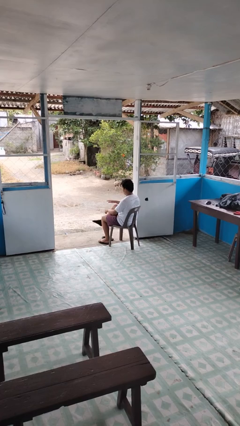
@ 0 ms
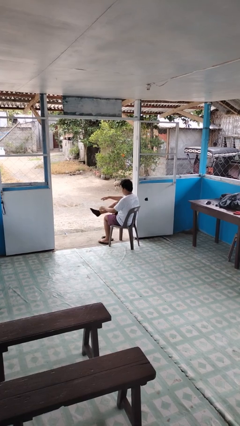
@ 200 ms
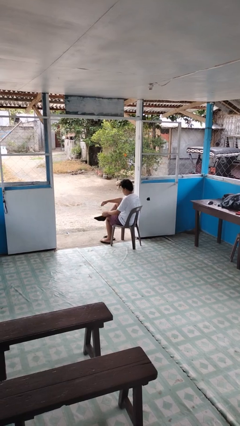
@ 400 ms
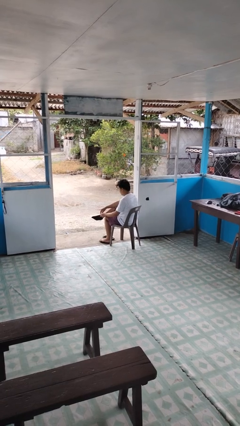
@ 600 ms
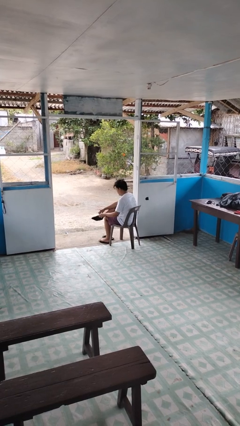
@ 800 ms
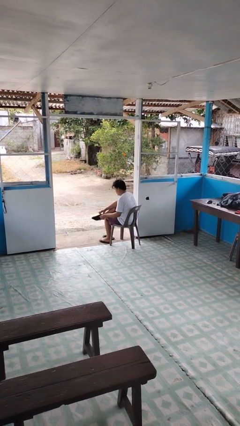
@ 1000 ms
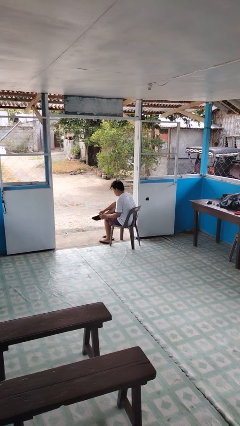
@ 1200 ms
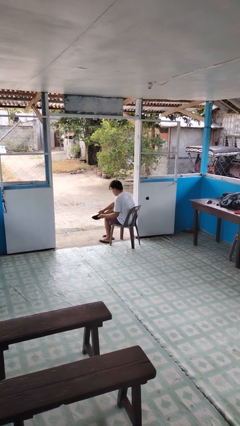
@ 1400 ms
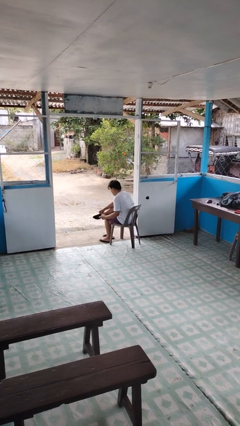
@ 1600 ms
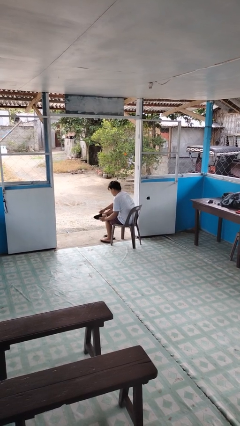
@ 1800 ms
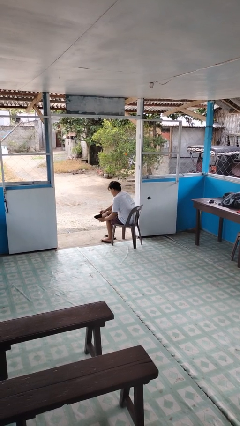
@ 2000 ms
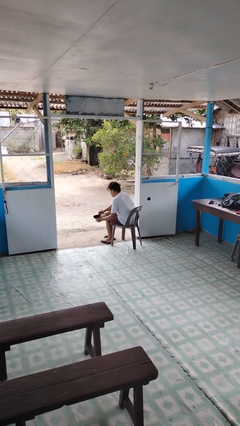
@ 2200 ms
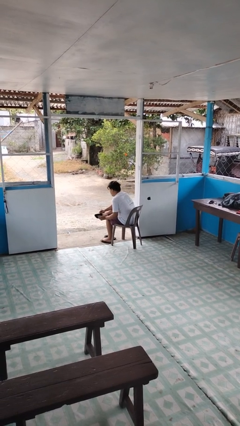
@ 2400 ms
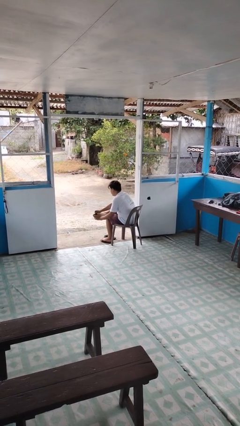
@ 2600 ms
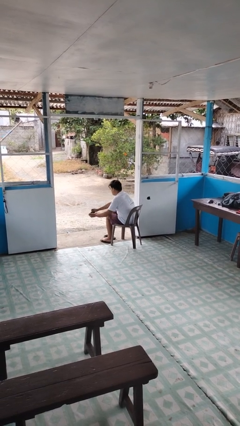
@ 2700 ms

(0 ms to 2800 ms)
person takes off socks

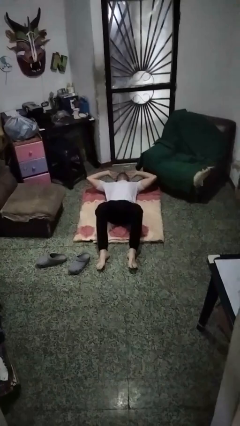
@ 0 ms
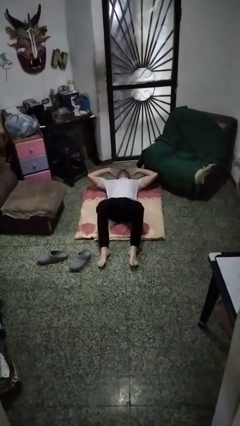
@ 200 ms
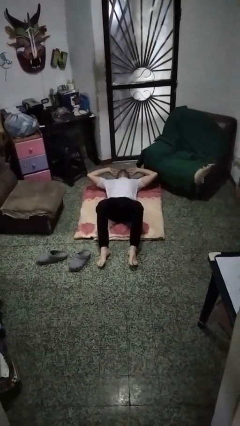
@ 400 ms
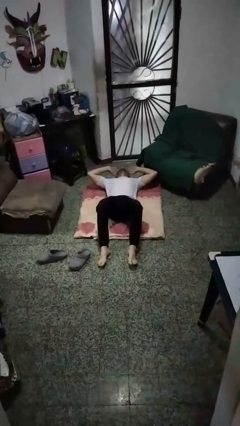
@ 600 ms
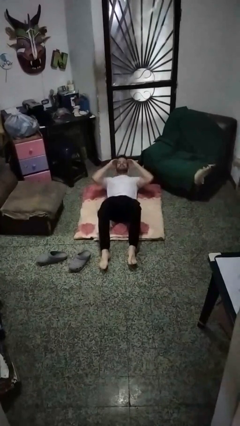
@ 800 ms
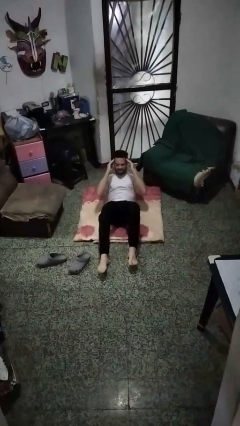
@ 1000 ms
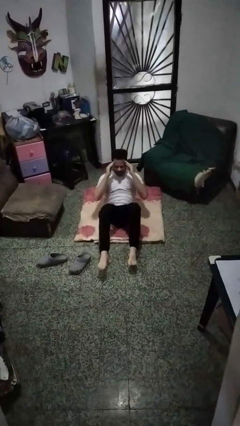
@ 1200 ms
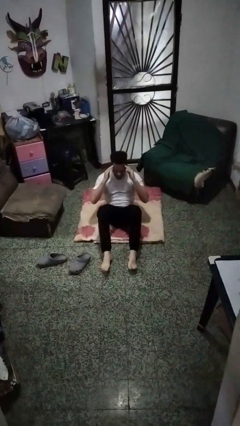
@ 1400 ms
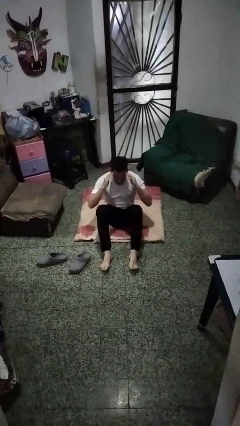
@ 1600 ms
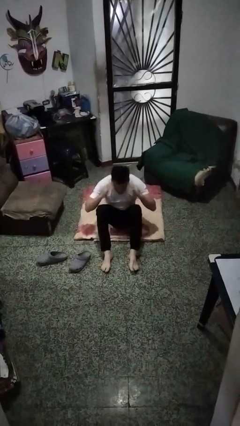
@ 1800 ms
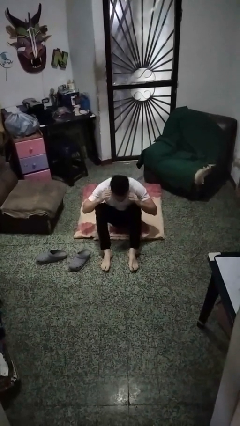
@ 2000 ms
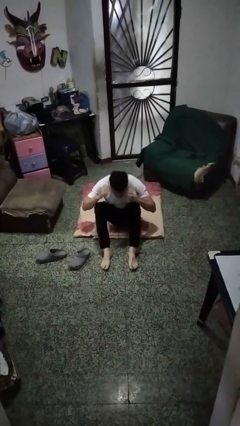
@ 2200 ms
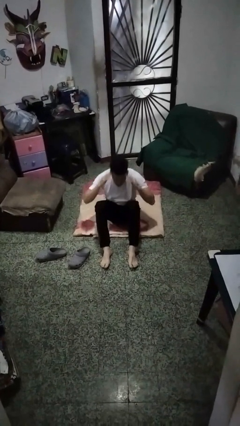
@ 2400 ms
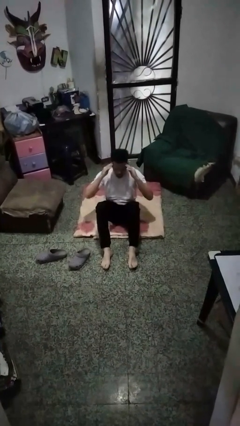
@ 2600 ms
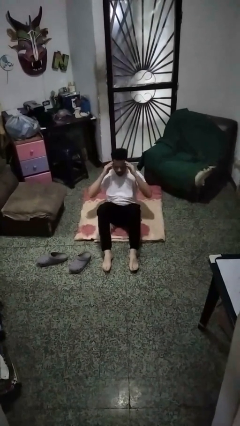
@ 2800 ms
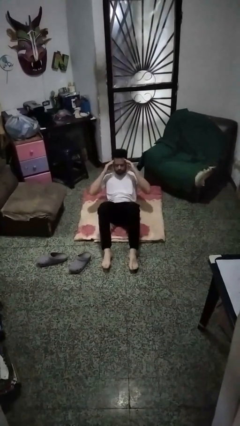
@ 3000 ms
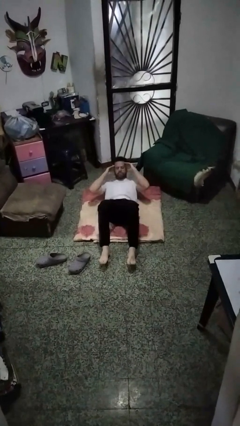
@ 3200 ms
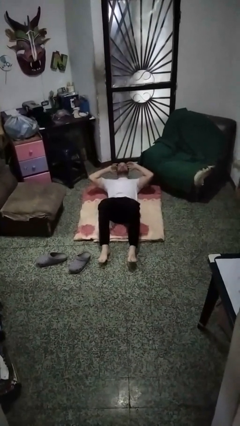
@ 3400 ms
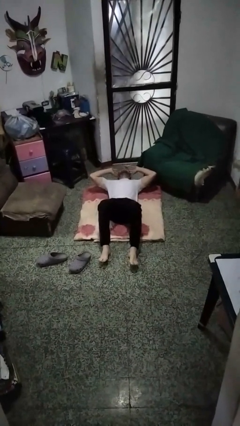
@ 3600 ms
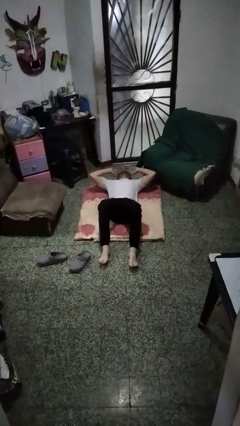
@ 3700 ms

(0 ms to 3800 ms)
person exercises with situp

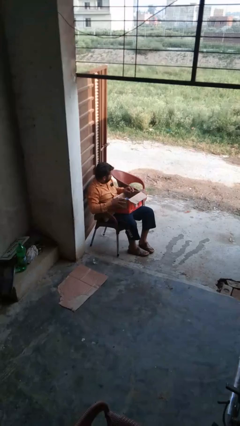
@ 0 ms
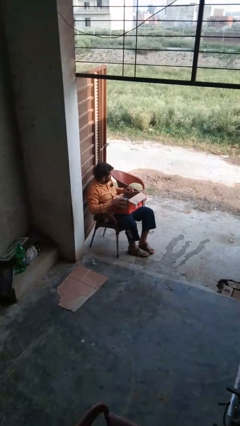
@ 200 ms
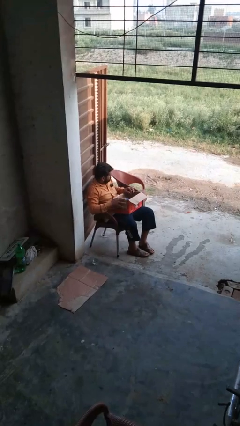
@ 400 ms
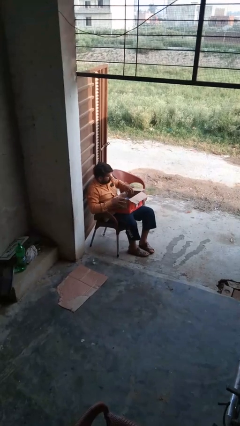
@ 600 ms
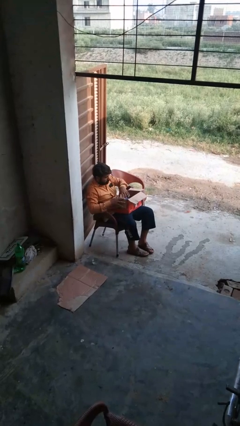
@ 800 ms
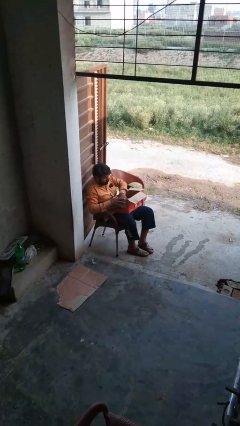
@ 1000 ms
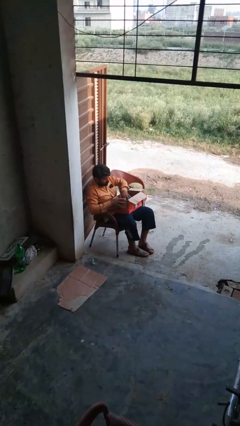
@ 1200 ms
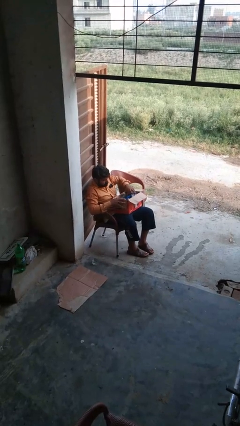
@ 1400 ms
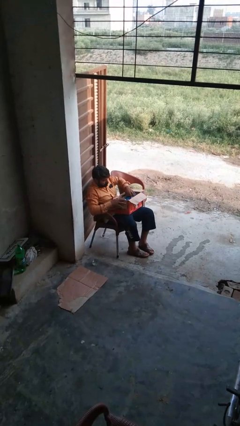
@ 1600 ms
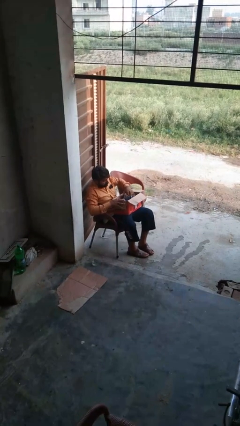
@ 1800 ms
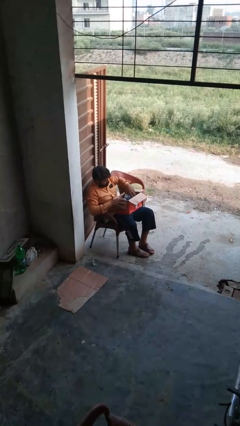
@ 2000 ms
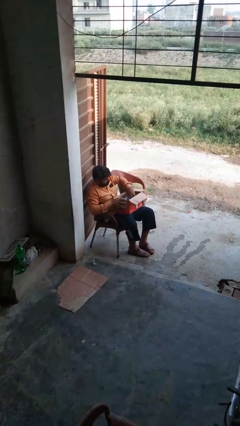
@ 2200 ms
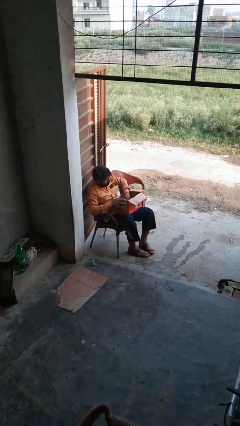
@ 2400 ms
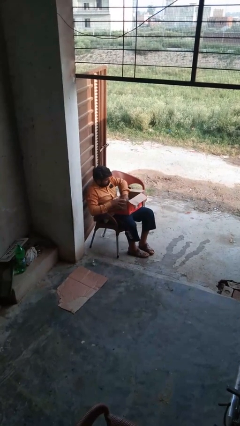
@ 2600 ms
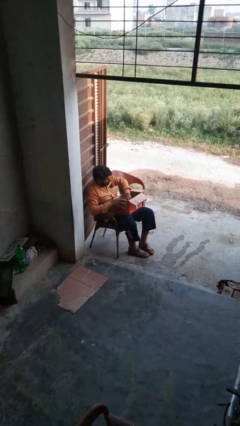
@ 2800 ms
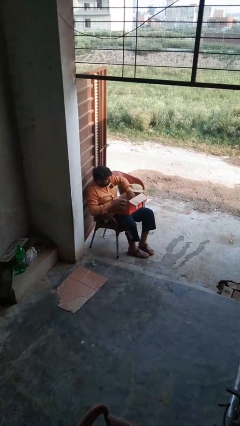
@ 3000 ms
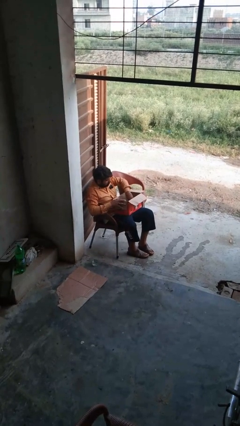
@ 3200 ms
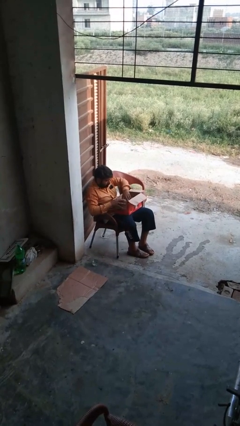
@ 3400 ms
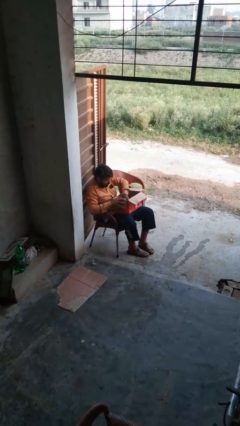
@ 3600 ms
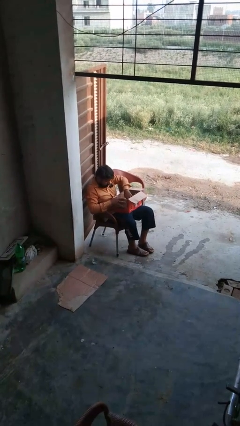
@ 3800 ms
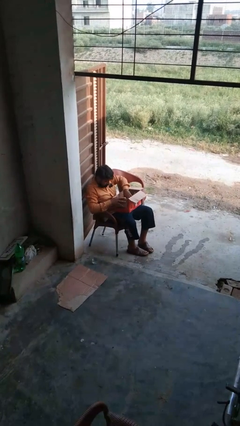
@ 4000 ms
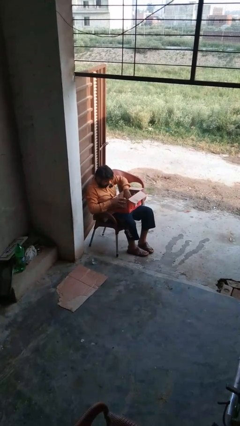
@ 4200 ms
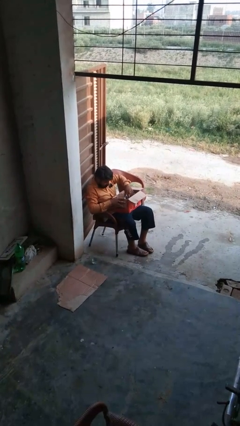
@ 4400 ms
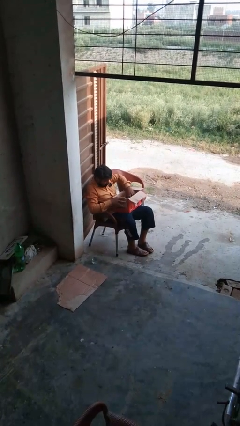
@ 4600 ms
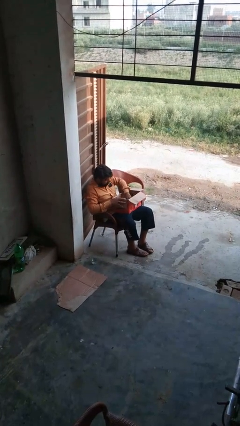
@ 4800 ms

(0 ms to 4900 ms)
person searches in cabinet

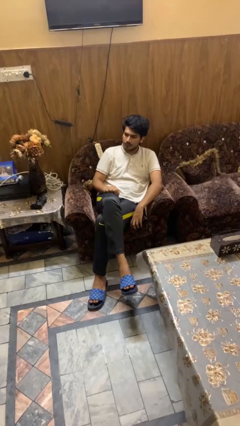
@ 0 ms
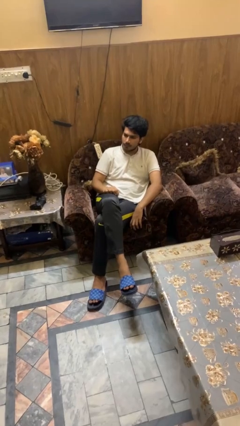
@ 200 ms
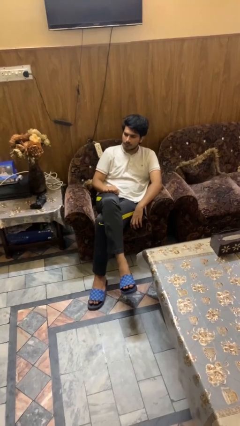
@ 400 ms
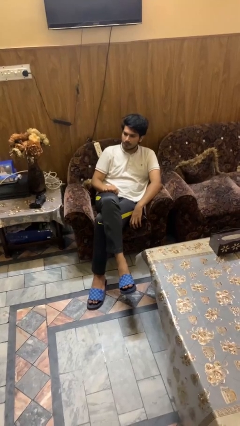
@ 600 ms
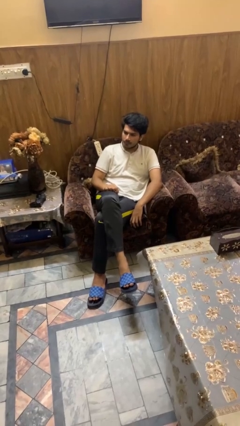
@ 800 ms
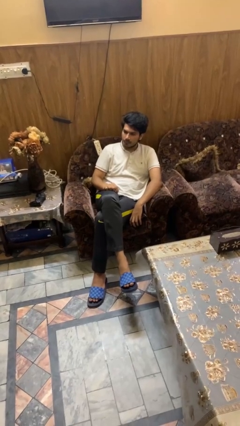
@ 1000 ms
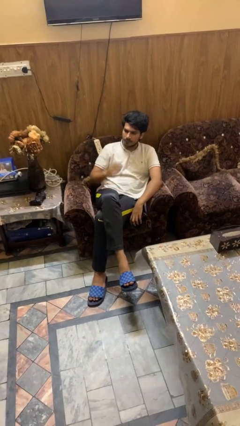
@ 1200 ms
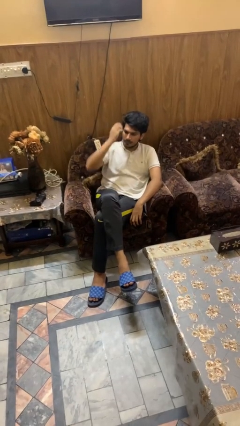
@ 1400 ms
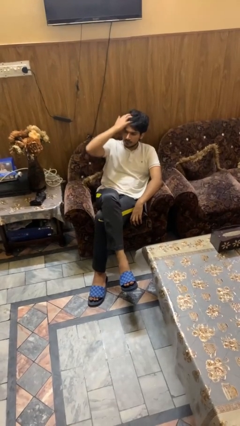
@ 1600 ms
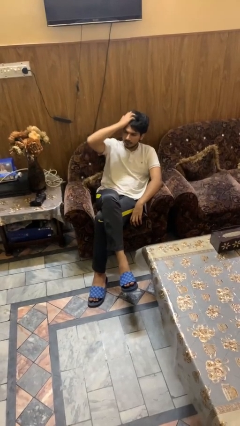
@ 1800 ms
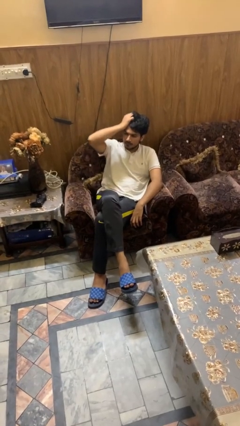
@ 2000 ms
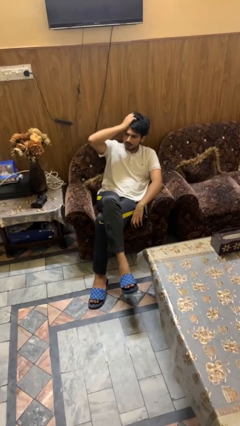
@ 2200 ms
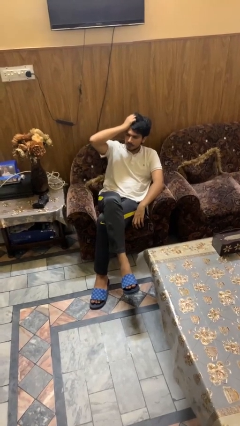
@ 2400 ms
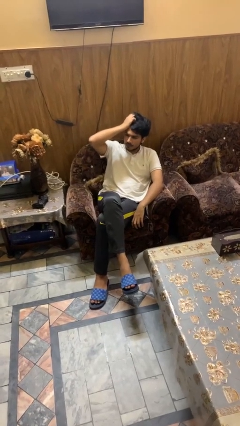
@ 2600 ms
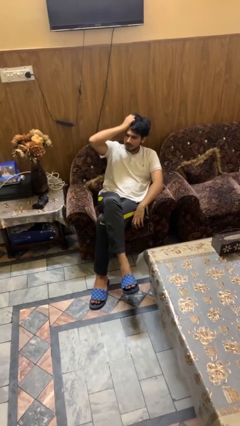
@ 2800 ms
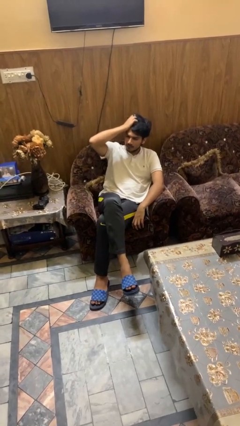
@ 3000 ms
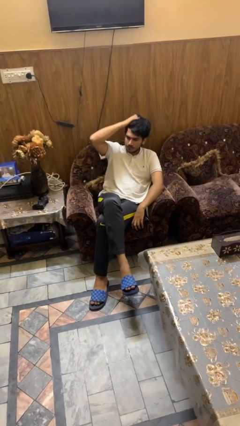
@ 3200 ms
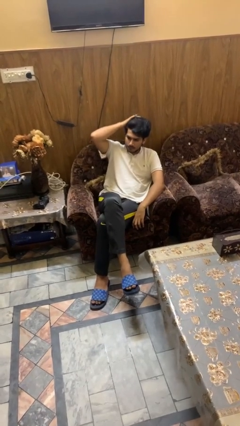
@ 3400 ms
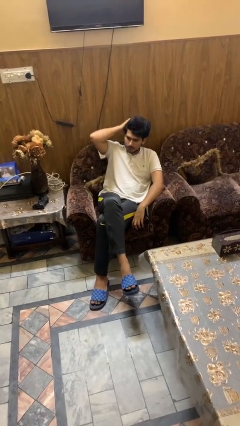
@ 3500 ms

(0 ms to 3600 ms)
person scratches face

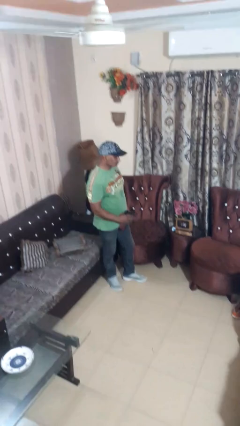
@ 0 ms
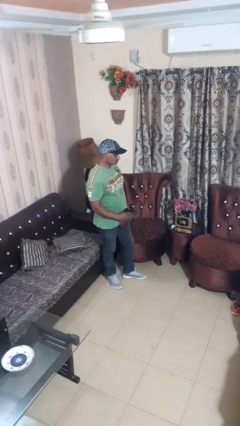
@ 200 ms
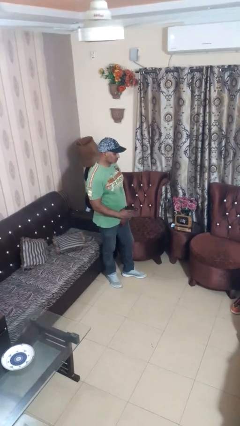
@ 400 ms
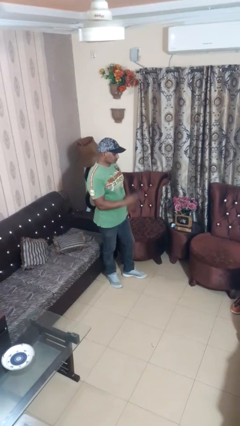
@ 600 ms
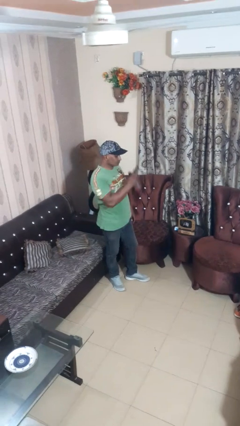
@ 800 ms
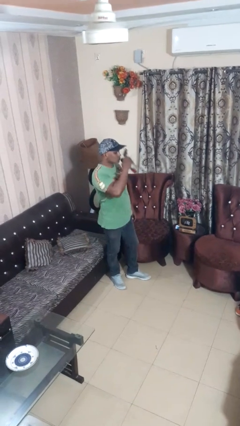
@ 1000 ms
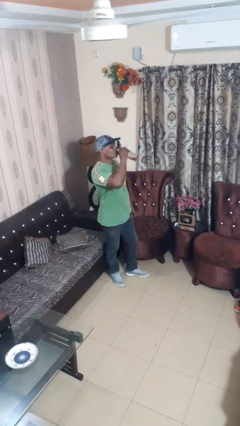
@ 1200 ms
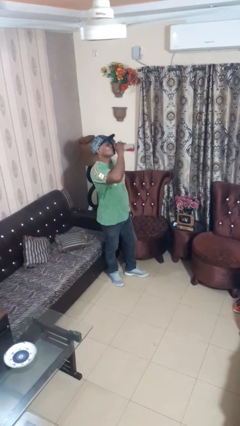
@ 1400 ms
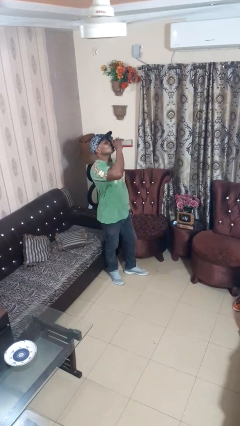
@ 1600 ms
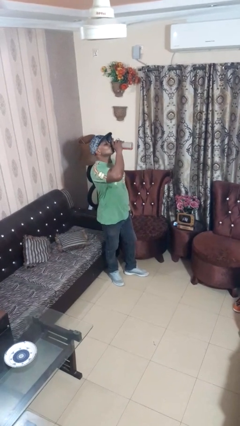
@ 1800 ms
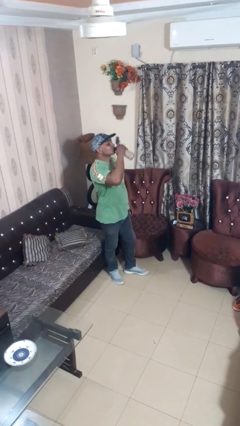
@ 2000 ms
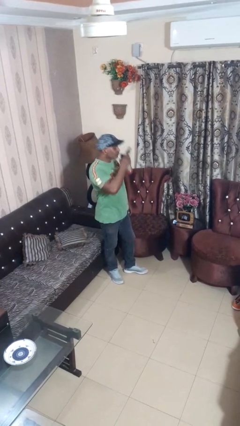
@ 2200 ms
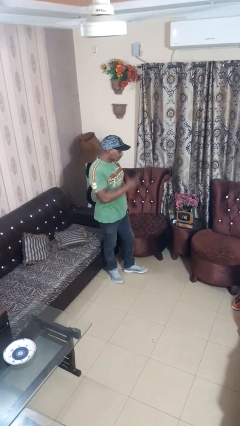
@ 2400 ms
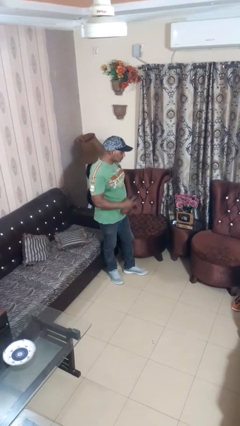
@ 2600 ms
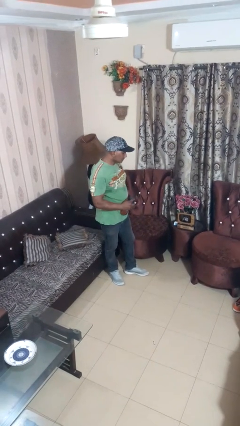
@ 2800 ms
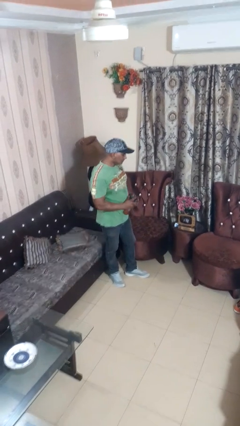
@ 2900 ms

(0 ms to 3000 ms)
person drinks from beverage can
